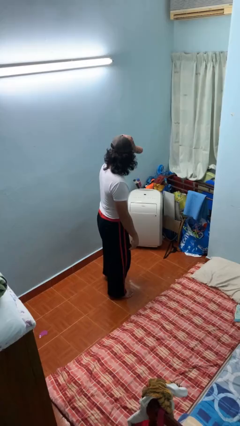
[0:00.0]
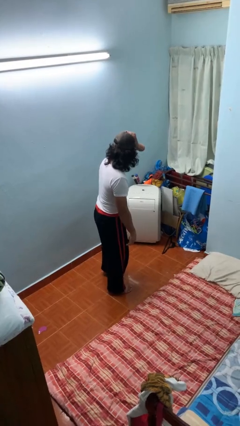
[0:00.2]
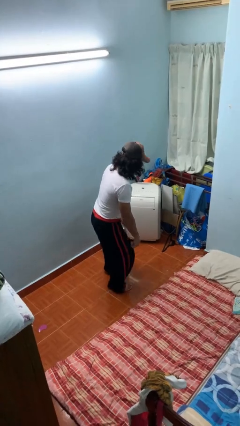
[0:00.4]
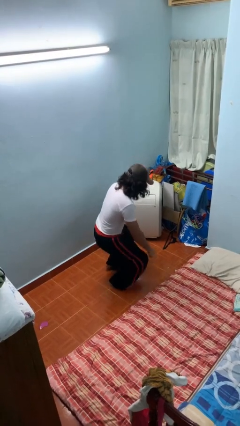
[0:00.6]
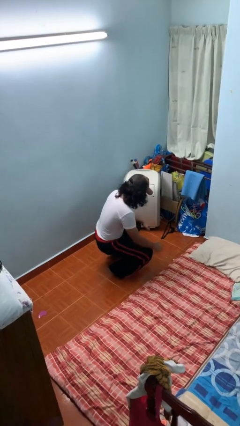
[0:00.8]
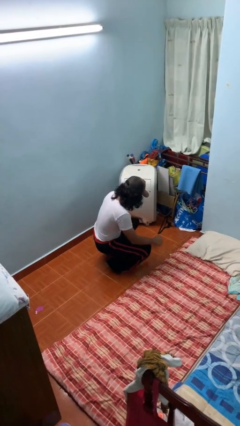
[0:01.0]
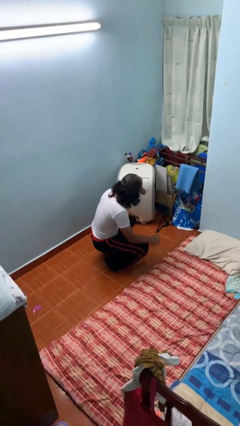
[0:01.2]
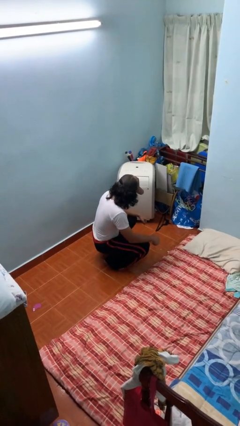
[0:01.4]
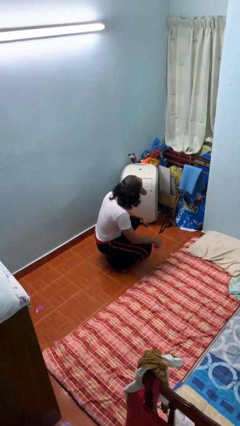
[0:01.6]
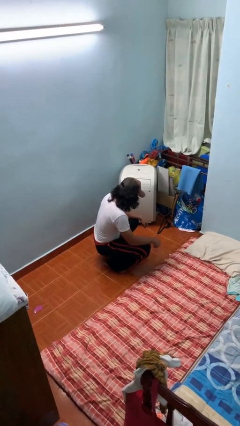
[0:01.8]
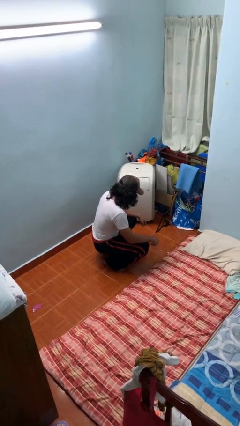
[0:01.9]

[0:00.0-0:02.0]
person squats

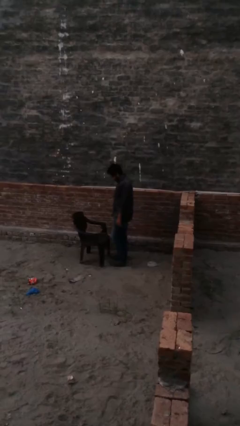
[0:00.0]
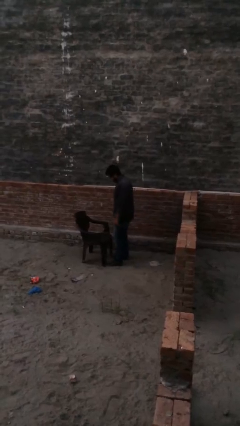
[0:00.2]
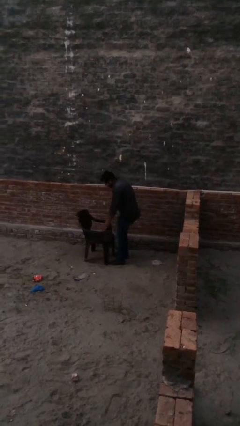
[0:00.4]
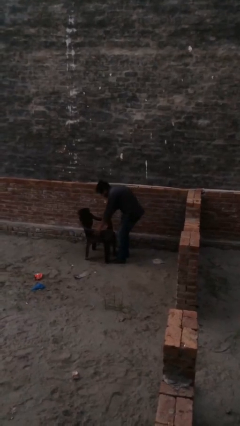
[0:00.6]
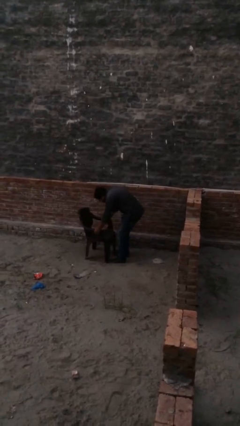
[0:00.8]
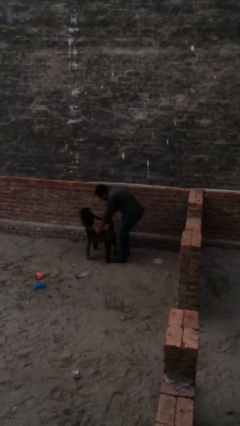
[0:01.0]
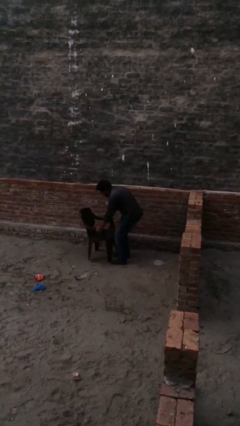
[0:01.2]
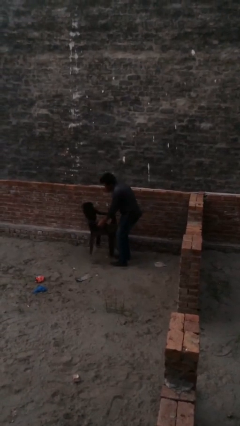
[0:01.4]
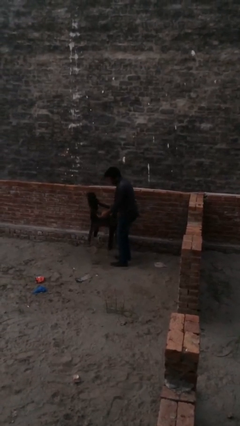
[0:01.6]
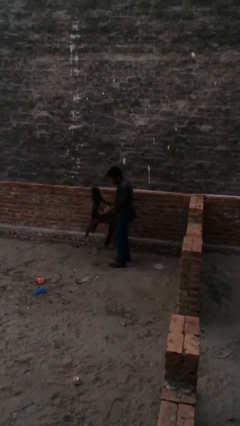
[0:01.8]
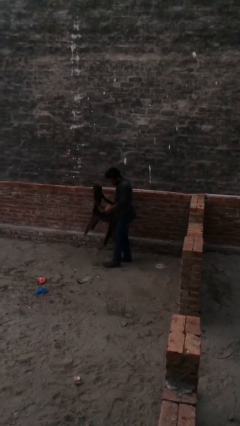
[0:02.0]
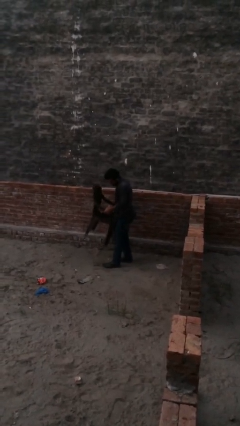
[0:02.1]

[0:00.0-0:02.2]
person picks up object from floor

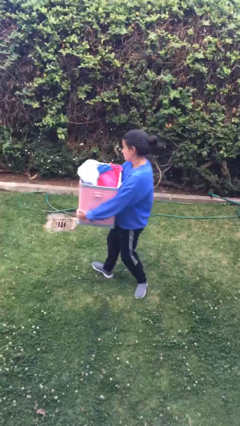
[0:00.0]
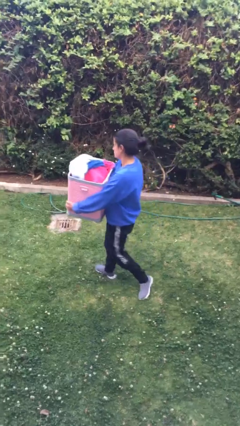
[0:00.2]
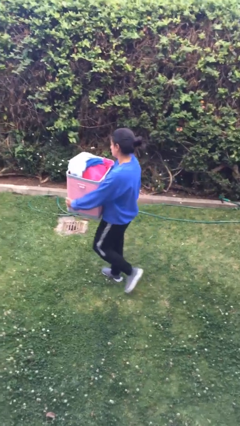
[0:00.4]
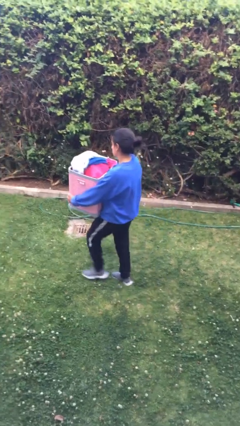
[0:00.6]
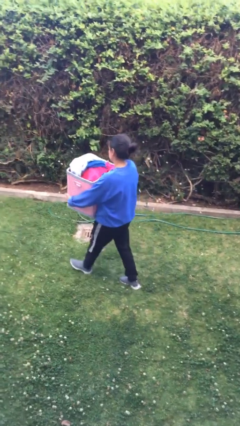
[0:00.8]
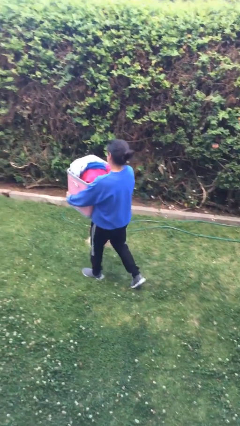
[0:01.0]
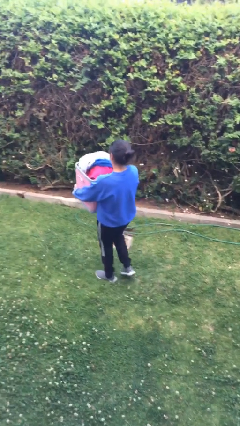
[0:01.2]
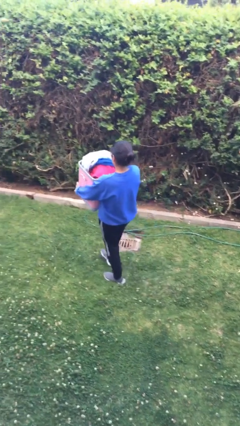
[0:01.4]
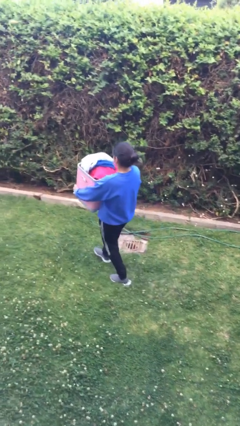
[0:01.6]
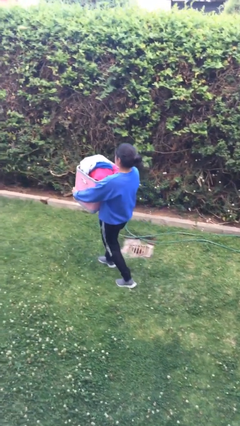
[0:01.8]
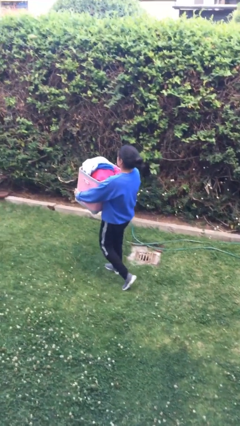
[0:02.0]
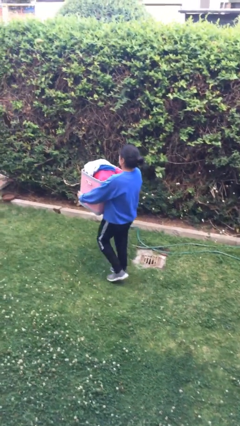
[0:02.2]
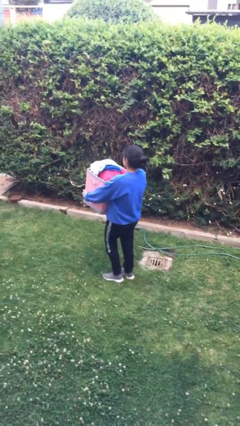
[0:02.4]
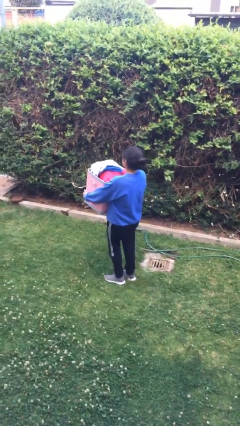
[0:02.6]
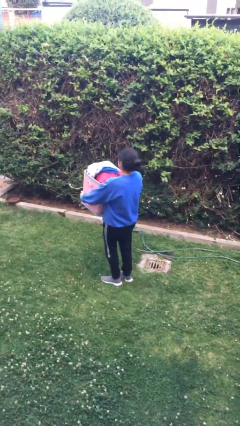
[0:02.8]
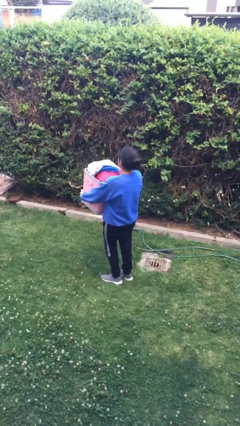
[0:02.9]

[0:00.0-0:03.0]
person carries groceries

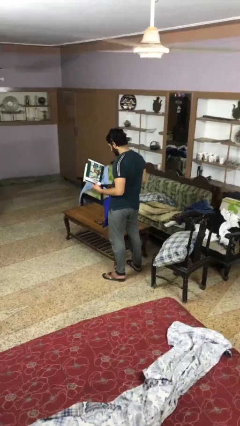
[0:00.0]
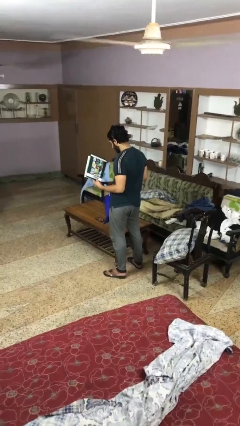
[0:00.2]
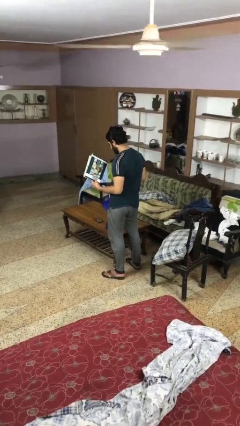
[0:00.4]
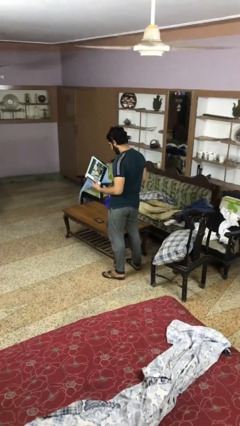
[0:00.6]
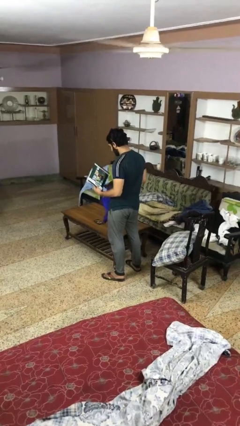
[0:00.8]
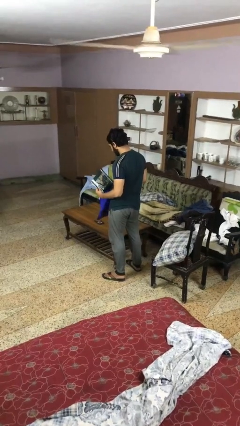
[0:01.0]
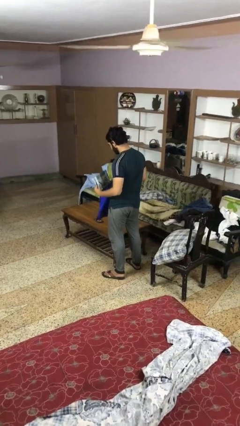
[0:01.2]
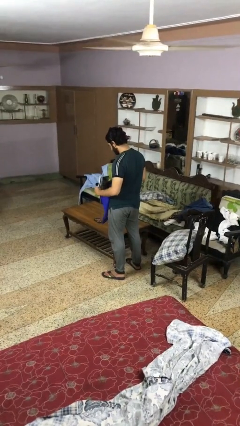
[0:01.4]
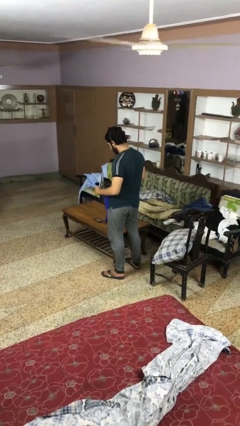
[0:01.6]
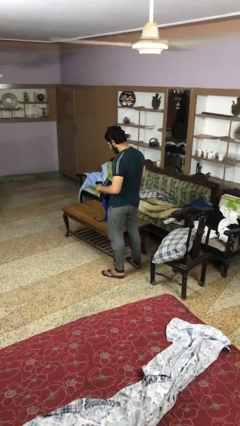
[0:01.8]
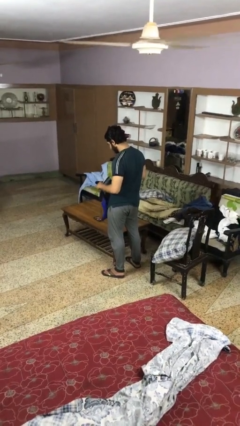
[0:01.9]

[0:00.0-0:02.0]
person puts object into bag

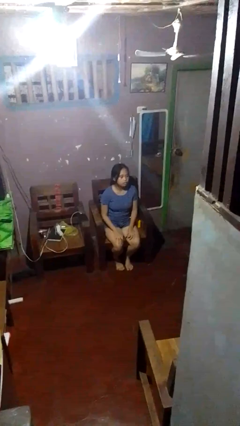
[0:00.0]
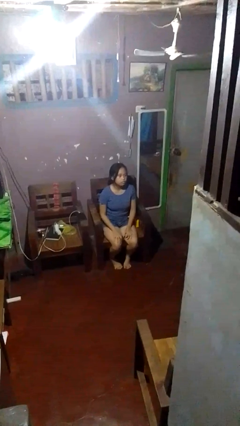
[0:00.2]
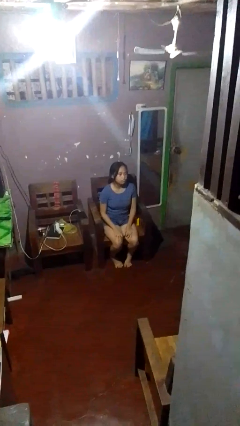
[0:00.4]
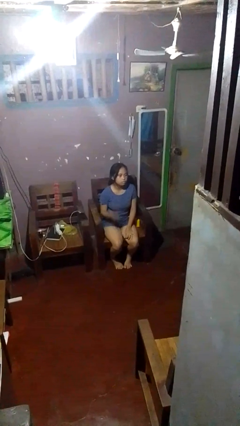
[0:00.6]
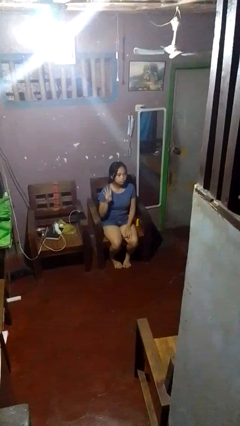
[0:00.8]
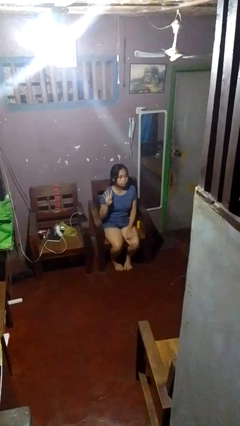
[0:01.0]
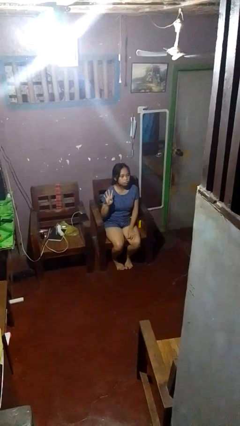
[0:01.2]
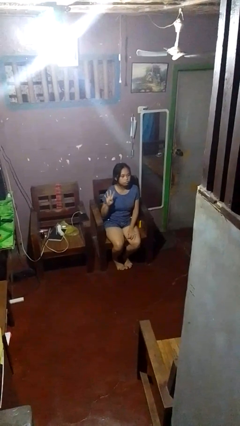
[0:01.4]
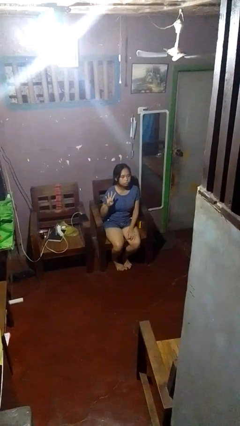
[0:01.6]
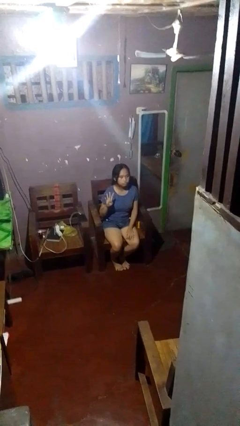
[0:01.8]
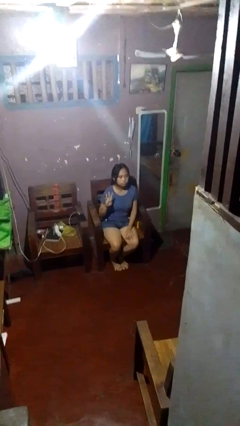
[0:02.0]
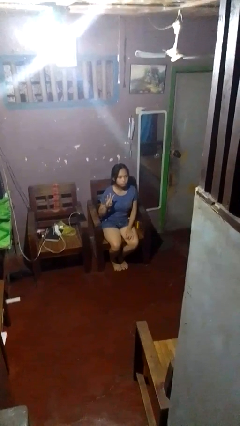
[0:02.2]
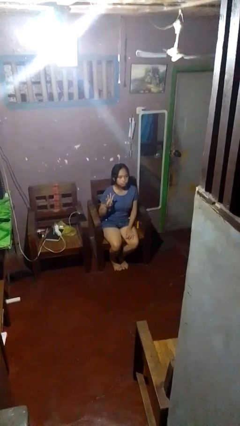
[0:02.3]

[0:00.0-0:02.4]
person gestures number four

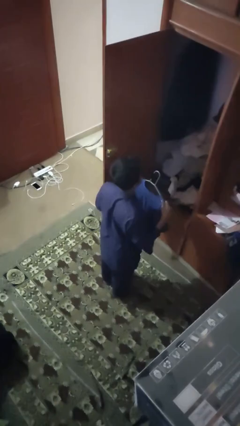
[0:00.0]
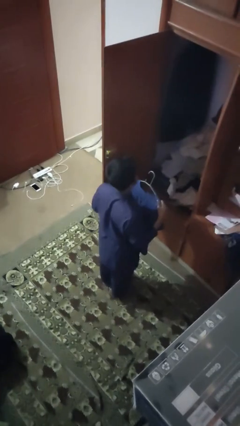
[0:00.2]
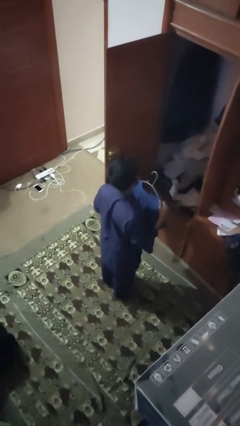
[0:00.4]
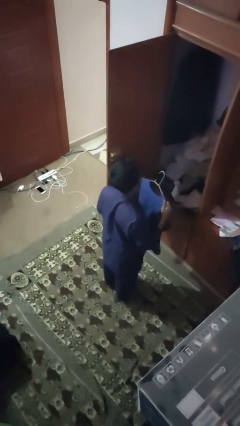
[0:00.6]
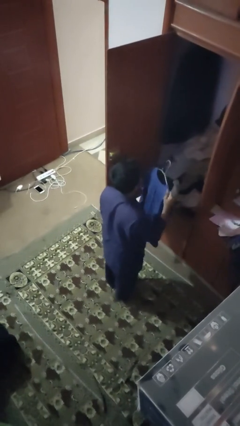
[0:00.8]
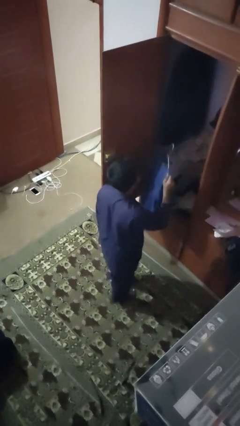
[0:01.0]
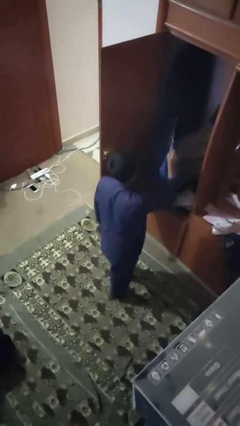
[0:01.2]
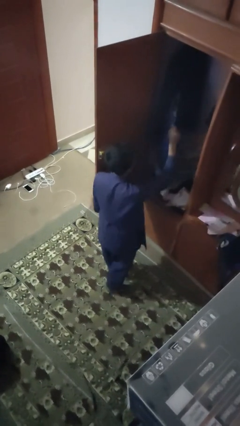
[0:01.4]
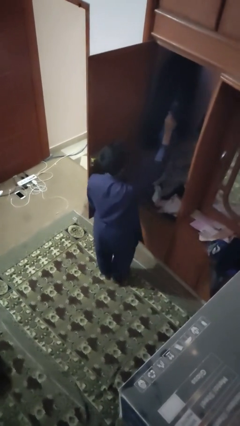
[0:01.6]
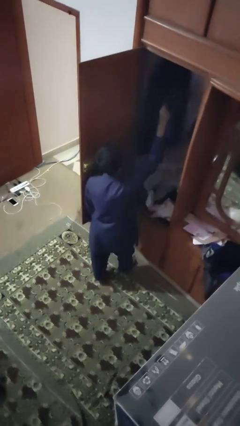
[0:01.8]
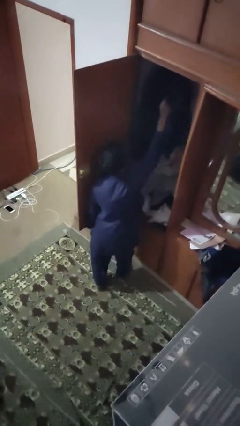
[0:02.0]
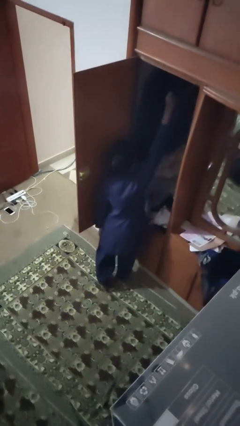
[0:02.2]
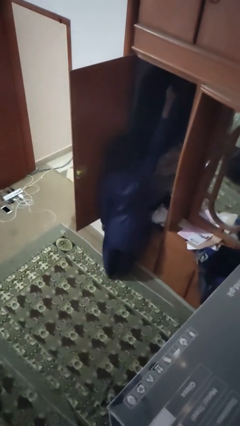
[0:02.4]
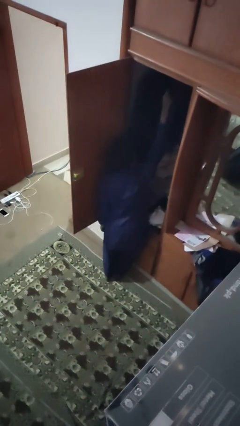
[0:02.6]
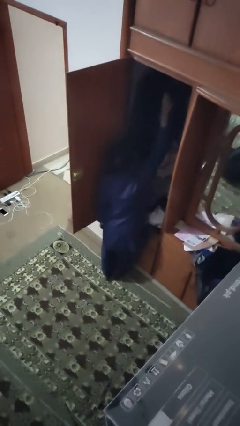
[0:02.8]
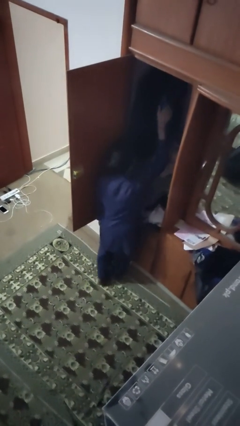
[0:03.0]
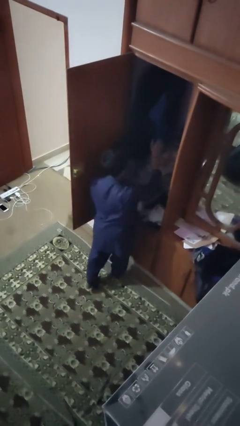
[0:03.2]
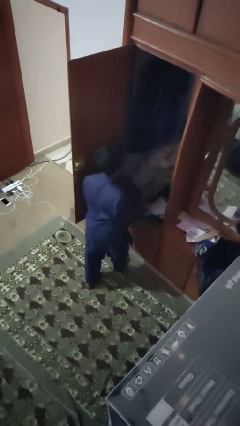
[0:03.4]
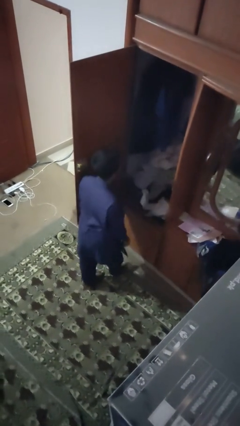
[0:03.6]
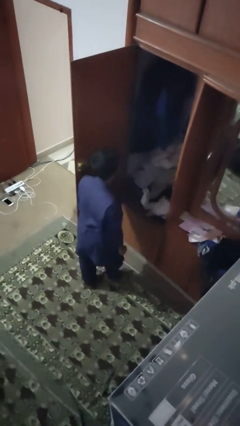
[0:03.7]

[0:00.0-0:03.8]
person puts clothes into closet

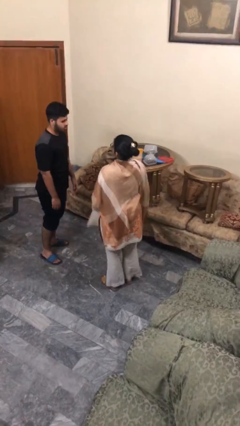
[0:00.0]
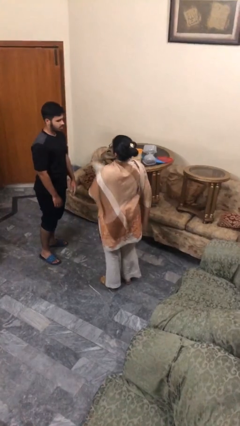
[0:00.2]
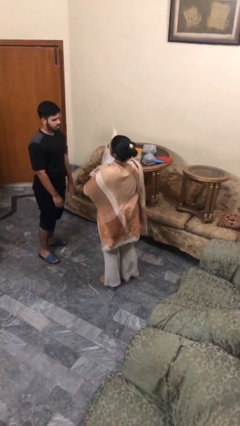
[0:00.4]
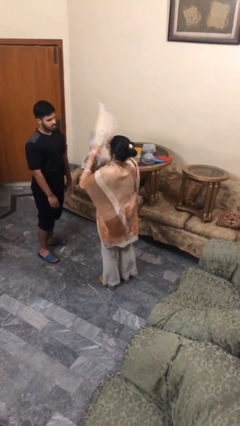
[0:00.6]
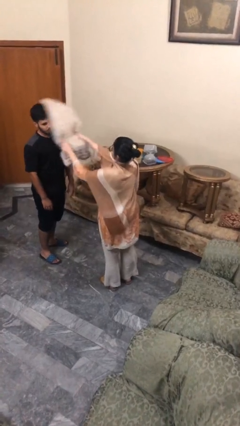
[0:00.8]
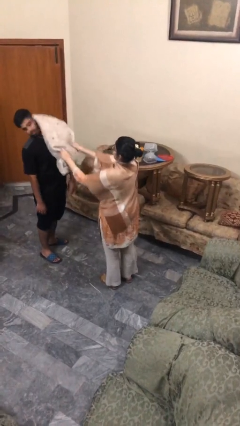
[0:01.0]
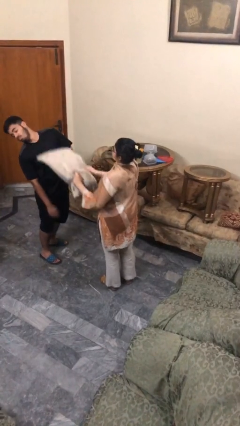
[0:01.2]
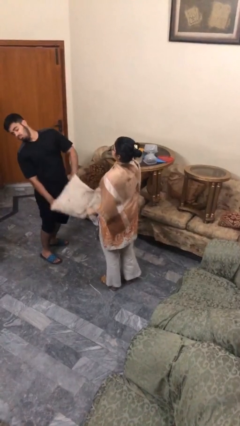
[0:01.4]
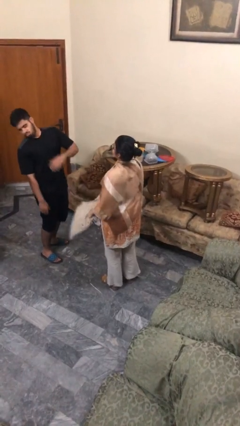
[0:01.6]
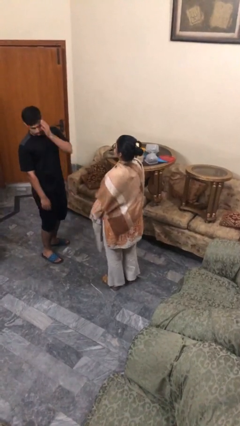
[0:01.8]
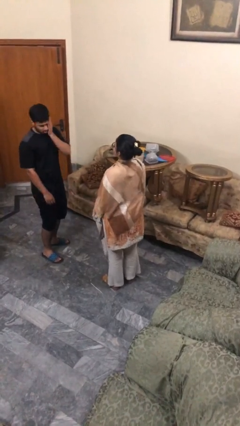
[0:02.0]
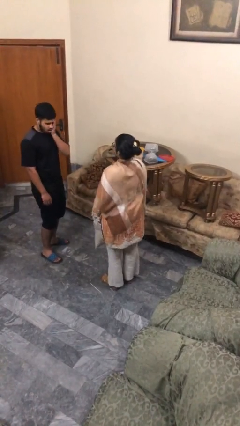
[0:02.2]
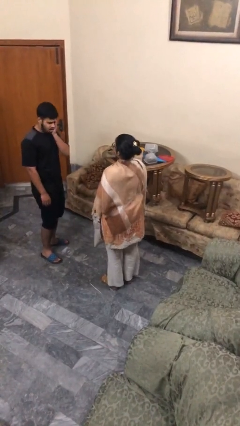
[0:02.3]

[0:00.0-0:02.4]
person hits person with pillow
